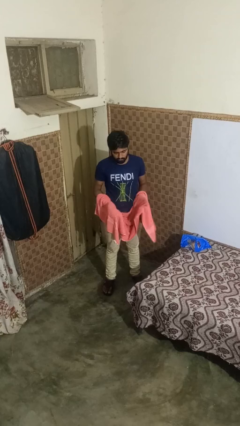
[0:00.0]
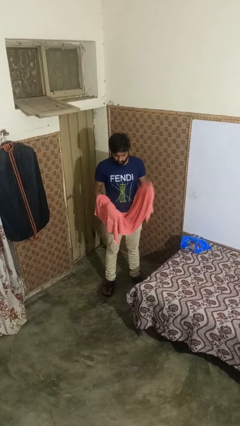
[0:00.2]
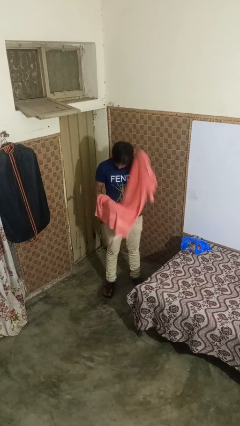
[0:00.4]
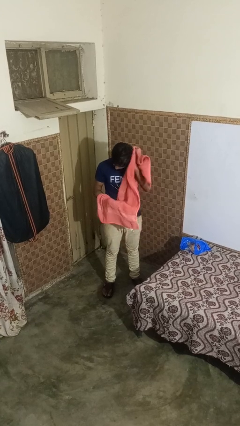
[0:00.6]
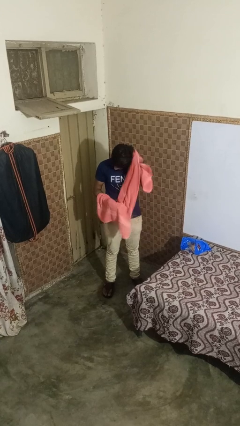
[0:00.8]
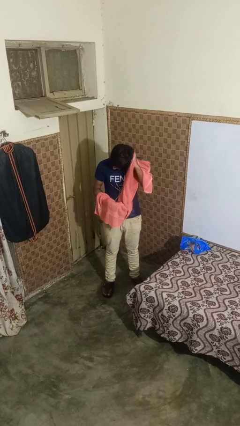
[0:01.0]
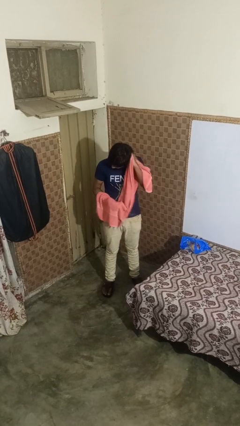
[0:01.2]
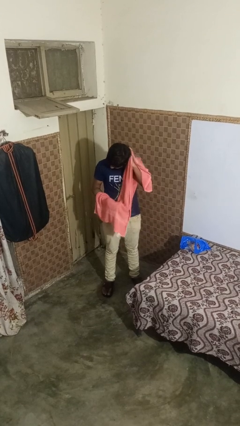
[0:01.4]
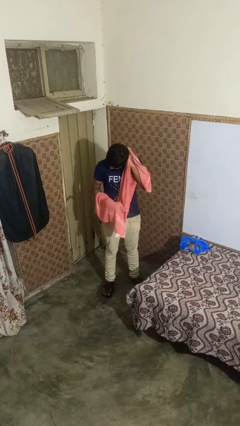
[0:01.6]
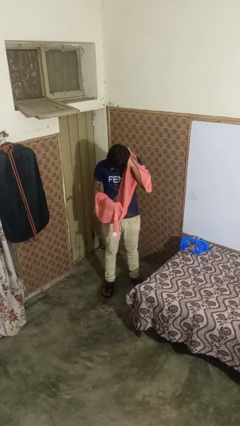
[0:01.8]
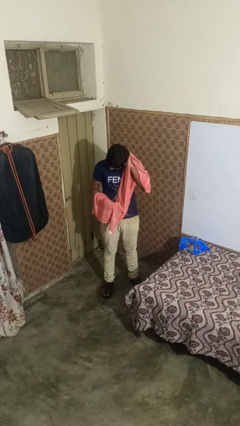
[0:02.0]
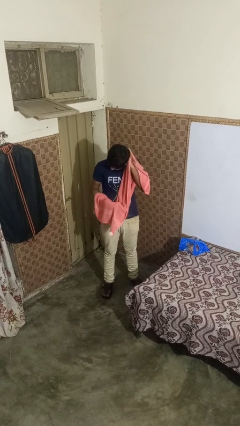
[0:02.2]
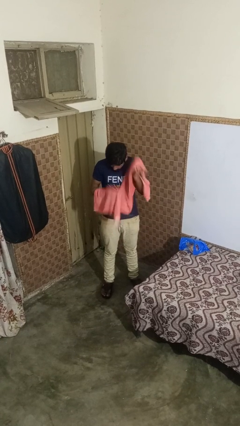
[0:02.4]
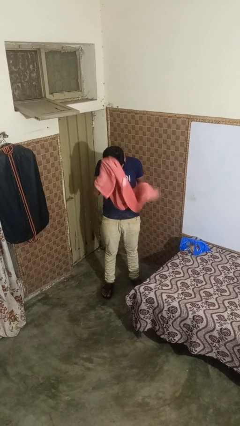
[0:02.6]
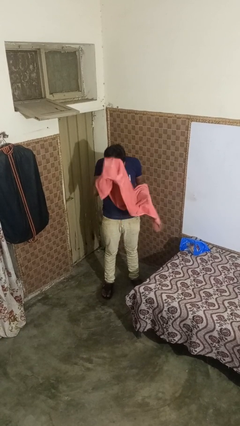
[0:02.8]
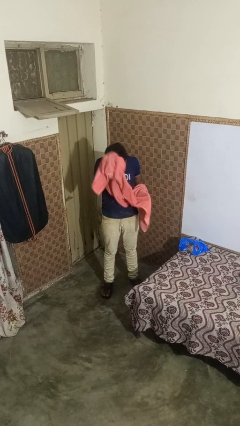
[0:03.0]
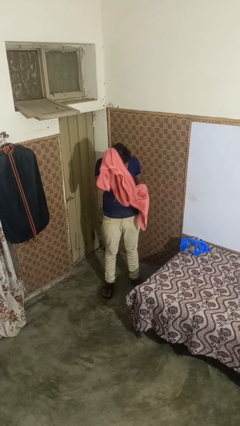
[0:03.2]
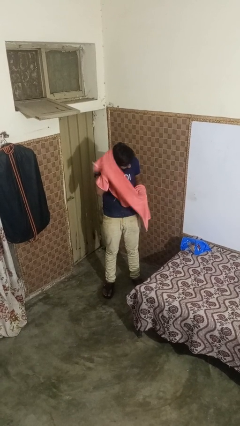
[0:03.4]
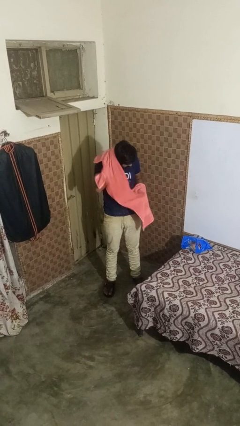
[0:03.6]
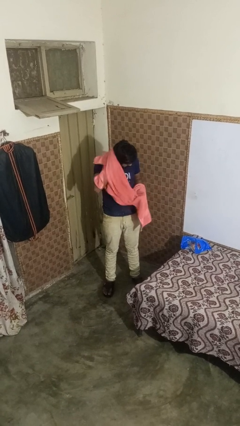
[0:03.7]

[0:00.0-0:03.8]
person dries hair with towel

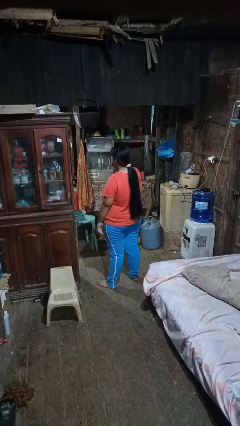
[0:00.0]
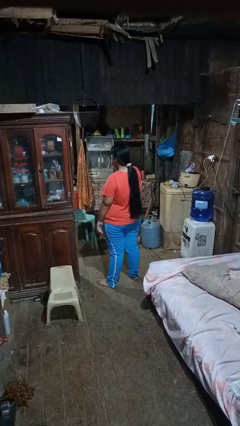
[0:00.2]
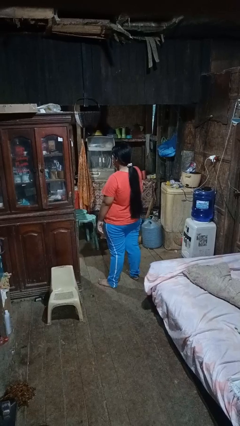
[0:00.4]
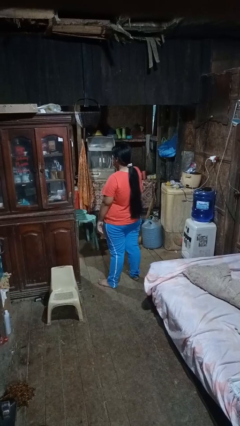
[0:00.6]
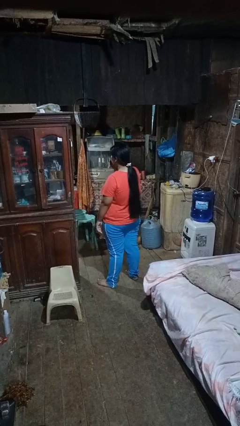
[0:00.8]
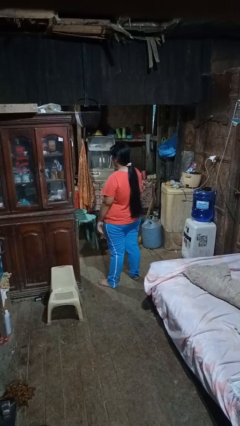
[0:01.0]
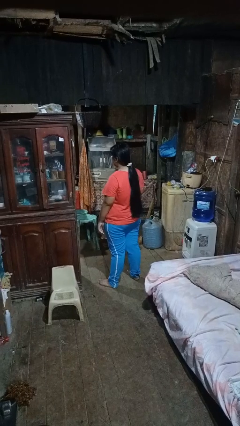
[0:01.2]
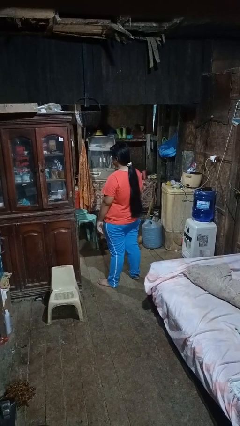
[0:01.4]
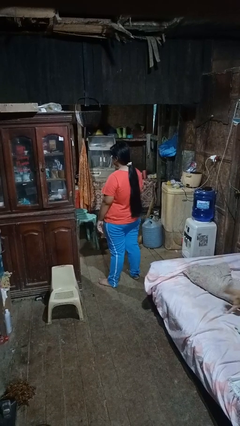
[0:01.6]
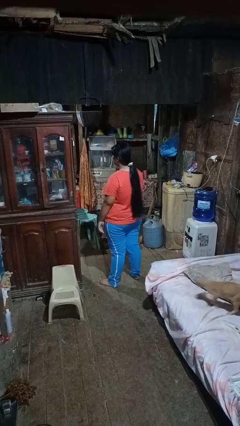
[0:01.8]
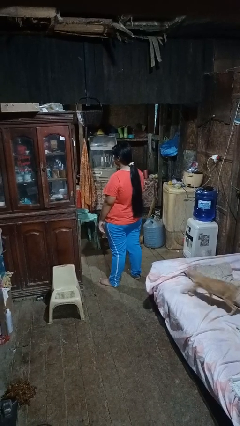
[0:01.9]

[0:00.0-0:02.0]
person yawns

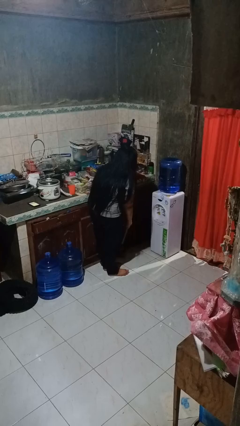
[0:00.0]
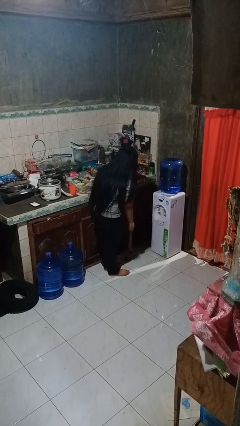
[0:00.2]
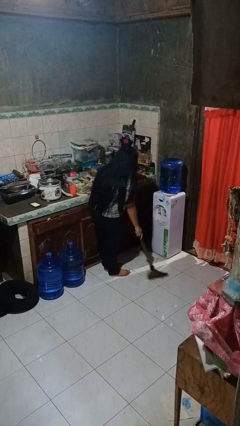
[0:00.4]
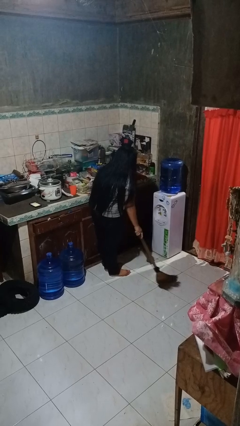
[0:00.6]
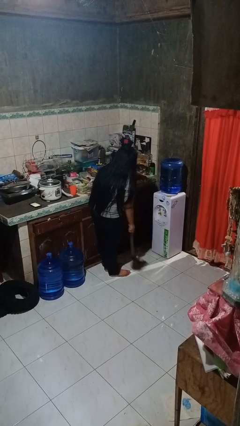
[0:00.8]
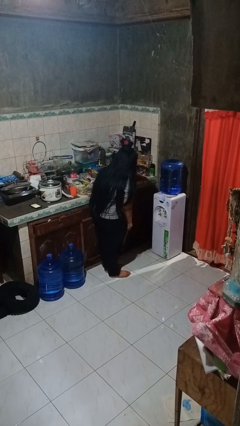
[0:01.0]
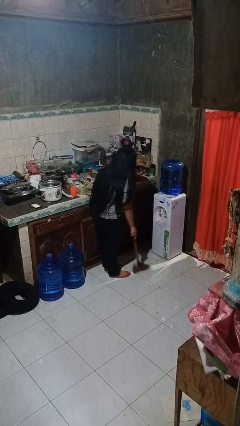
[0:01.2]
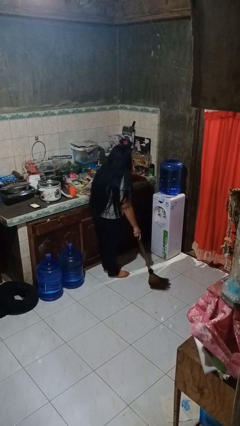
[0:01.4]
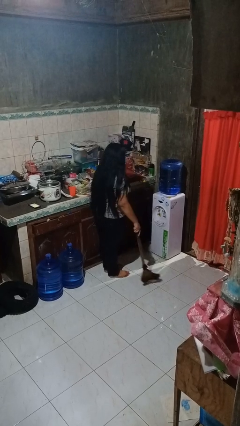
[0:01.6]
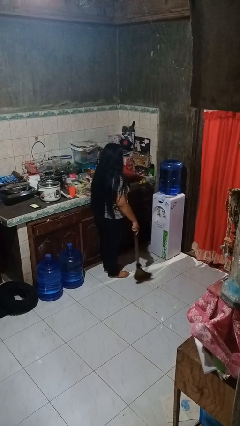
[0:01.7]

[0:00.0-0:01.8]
person sweeps floor

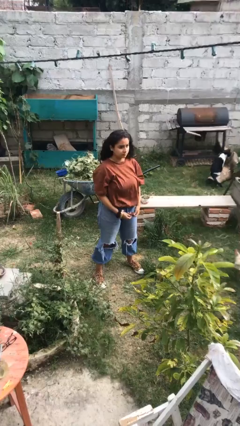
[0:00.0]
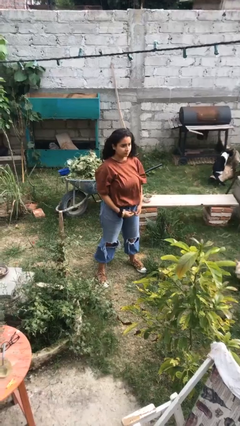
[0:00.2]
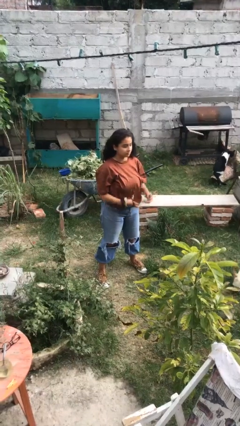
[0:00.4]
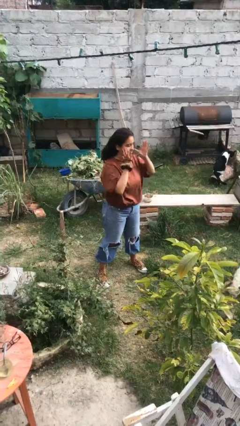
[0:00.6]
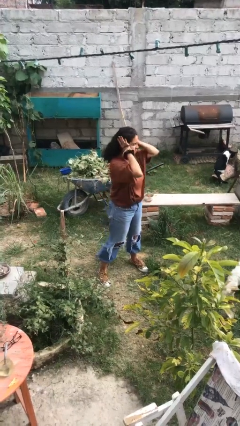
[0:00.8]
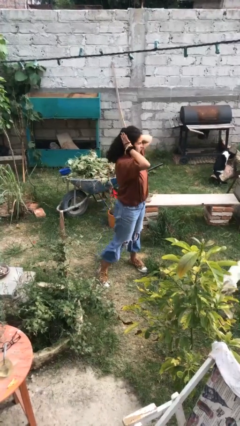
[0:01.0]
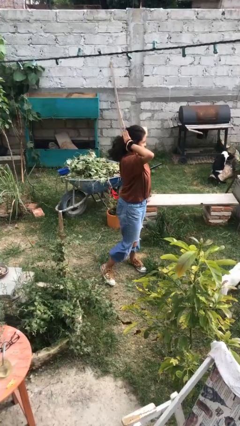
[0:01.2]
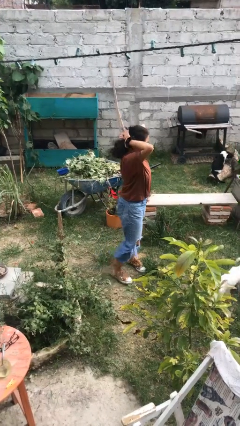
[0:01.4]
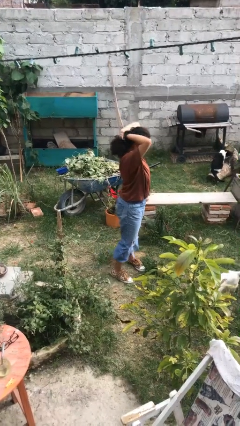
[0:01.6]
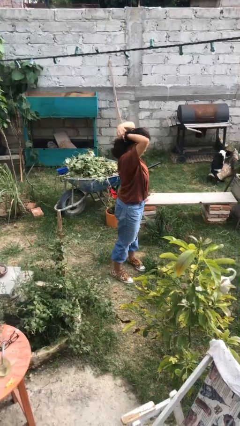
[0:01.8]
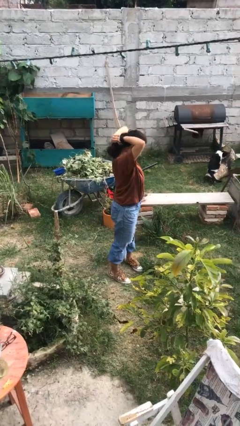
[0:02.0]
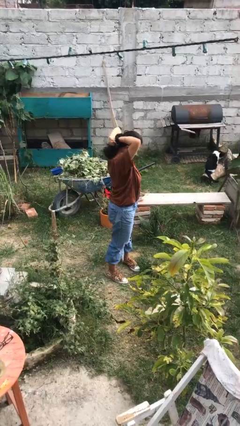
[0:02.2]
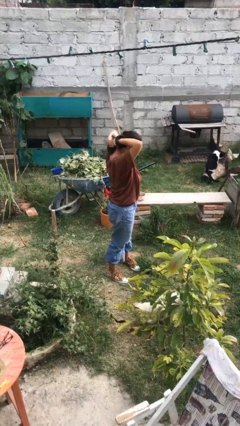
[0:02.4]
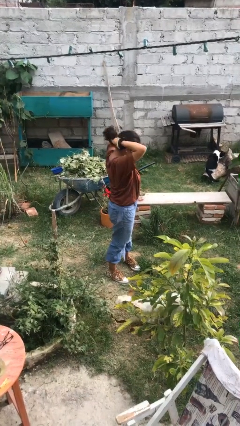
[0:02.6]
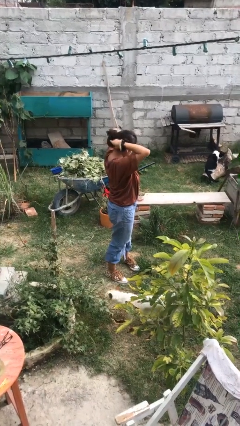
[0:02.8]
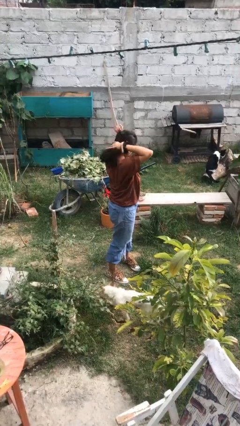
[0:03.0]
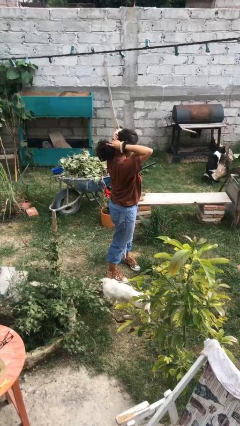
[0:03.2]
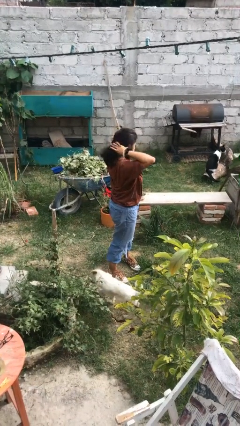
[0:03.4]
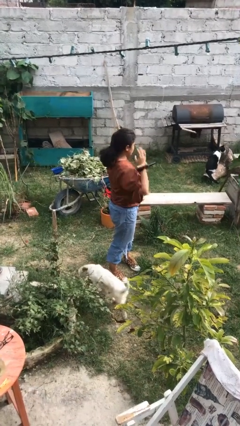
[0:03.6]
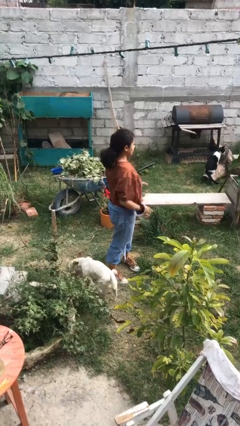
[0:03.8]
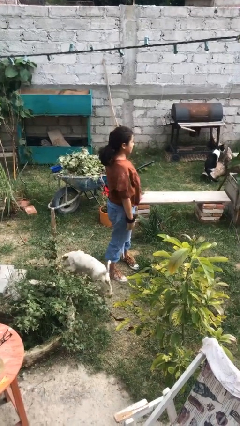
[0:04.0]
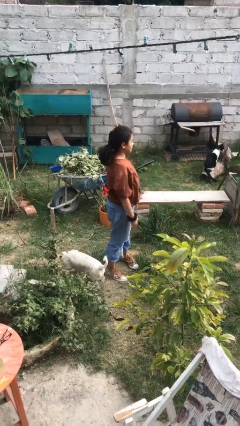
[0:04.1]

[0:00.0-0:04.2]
person puts hair in ponytail

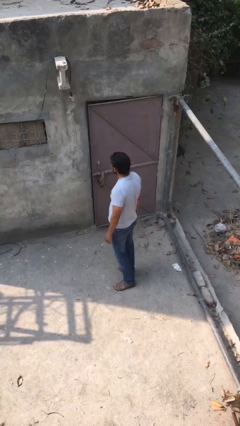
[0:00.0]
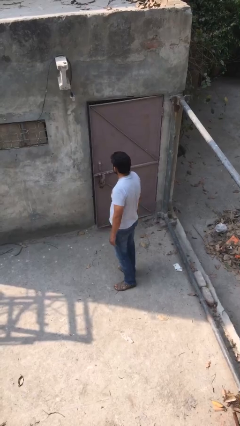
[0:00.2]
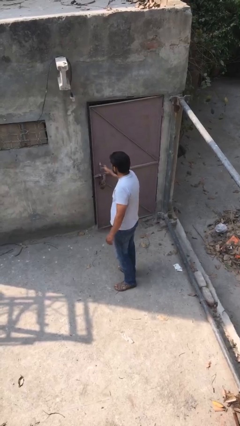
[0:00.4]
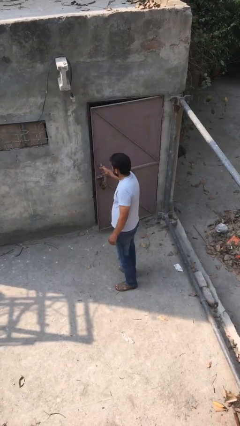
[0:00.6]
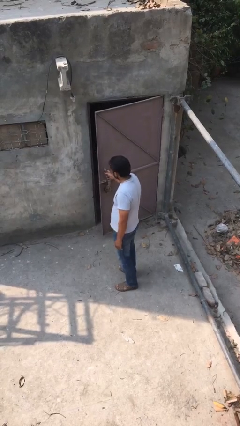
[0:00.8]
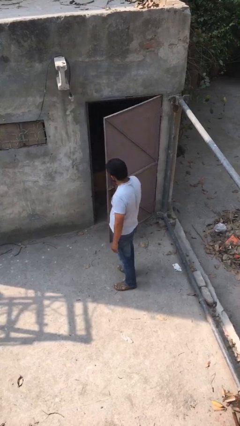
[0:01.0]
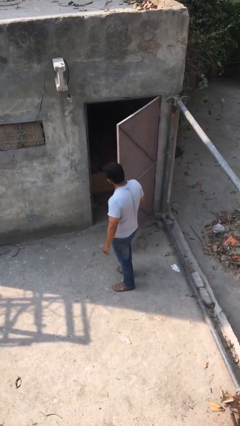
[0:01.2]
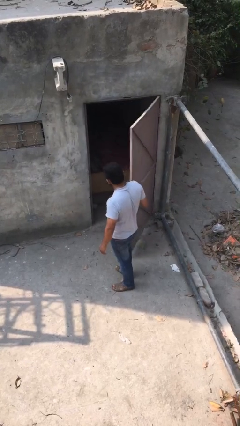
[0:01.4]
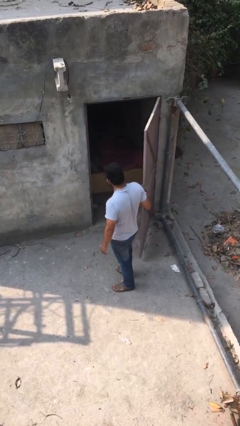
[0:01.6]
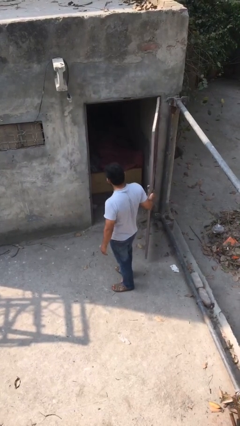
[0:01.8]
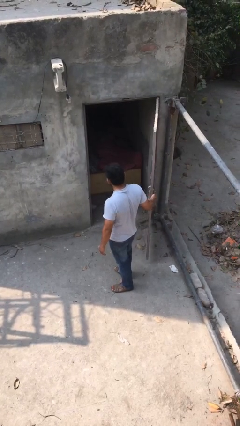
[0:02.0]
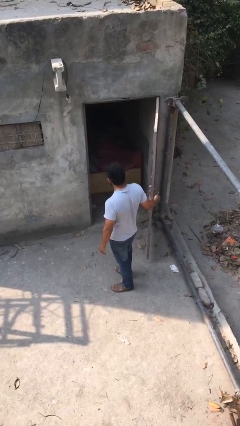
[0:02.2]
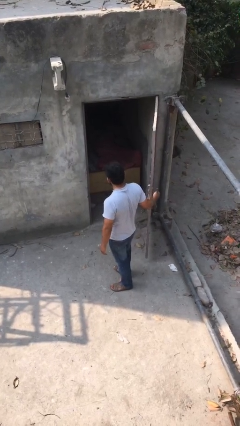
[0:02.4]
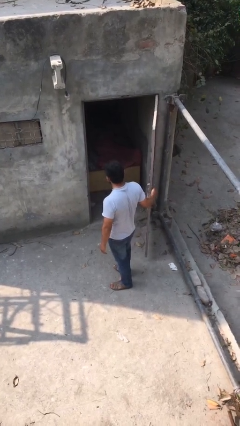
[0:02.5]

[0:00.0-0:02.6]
person opens facility door

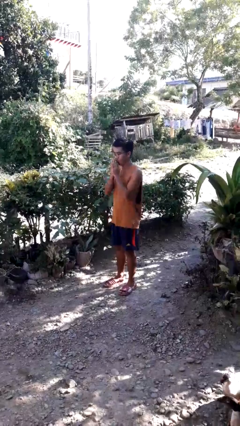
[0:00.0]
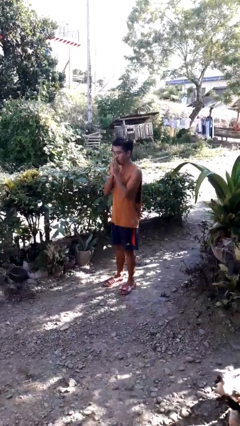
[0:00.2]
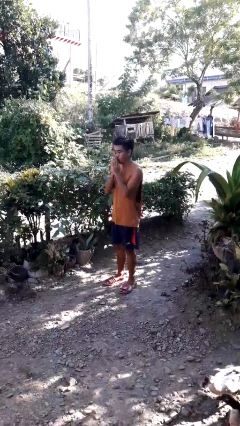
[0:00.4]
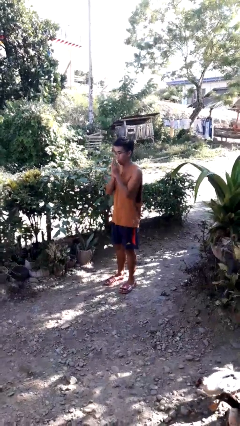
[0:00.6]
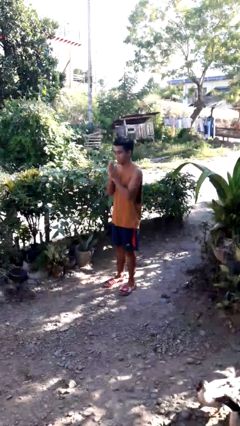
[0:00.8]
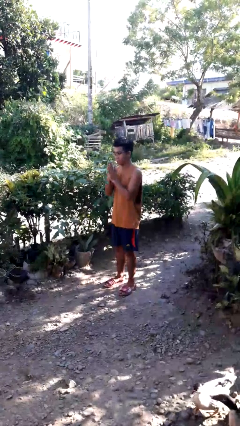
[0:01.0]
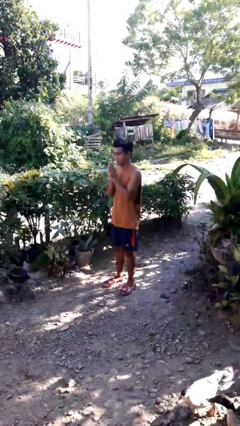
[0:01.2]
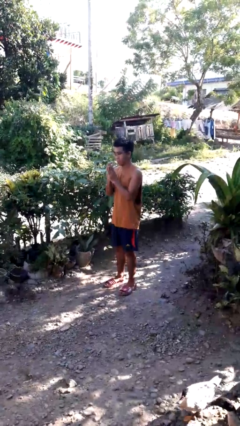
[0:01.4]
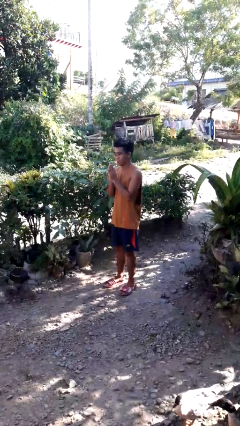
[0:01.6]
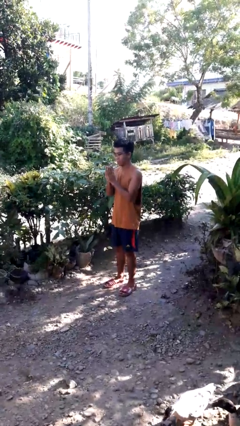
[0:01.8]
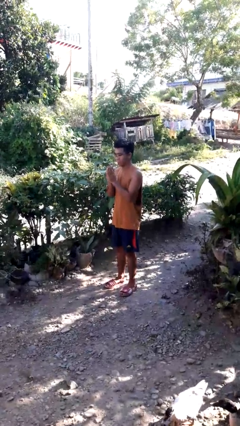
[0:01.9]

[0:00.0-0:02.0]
person blows into hands

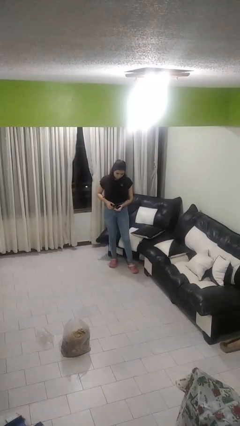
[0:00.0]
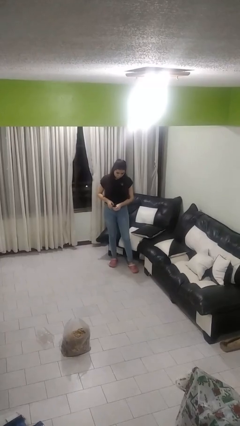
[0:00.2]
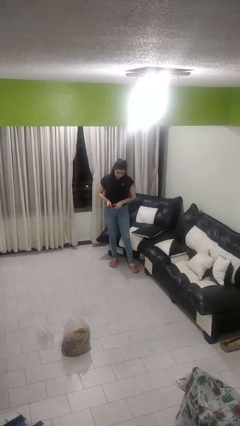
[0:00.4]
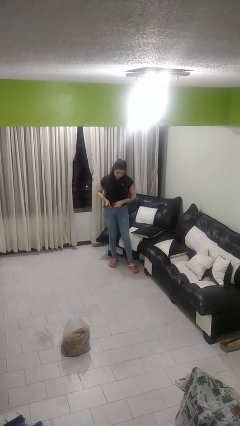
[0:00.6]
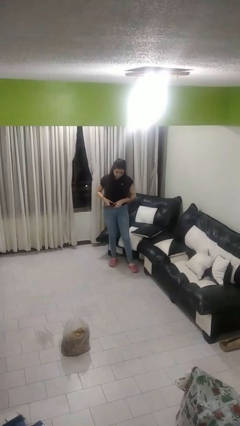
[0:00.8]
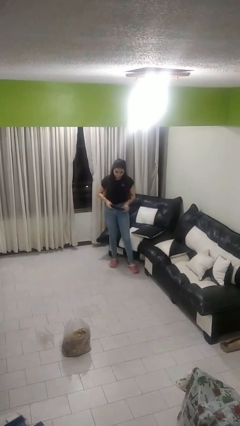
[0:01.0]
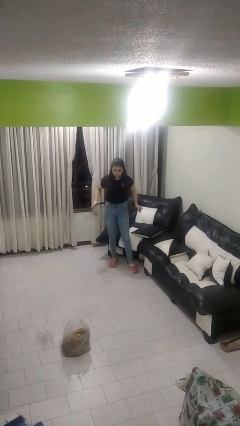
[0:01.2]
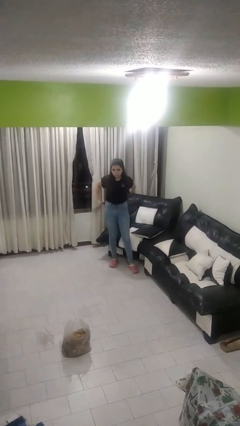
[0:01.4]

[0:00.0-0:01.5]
person takes off belt
